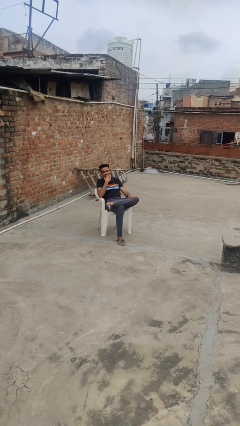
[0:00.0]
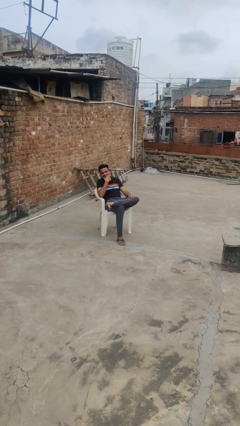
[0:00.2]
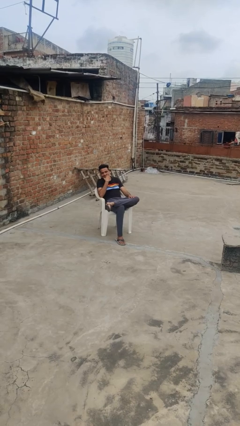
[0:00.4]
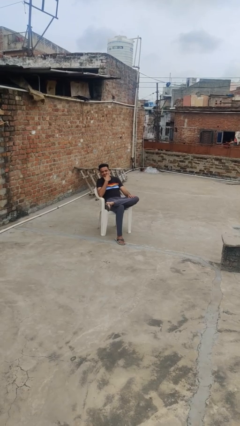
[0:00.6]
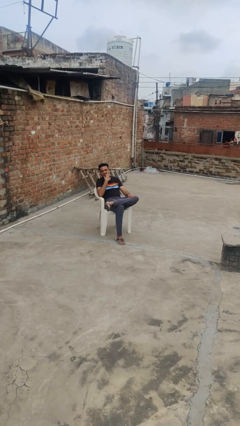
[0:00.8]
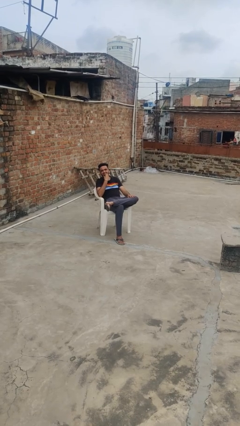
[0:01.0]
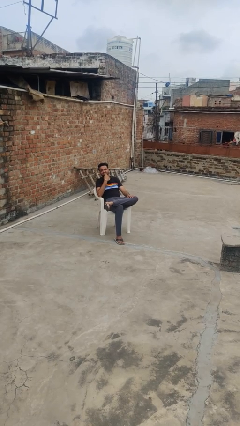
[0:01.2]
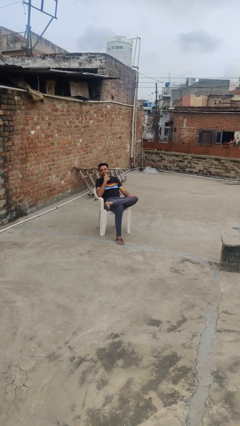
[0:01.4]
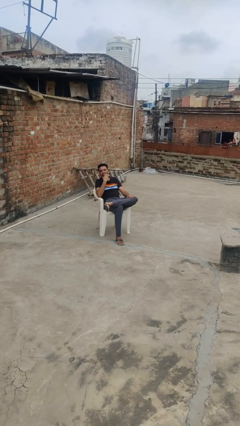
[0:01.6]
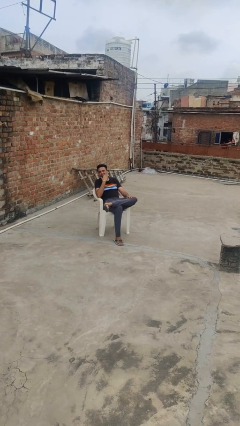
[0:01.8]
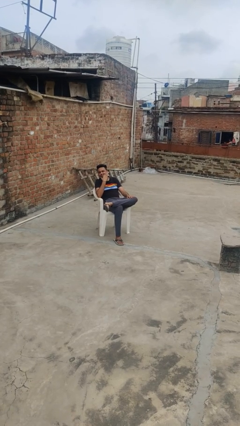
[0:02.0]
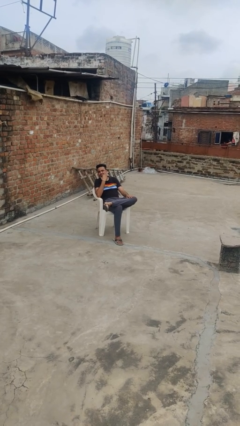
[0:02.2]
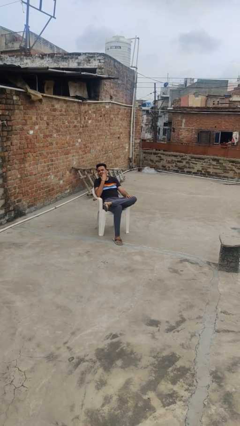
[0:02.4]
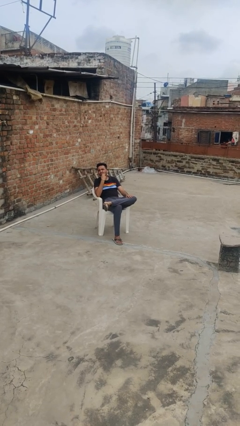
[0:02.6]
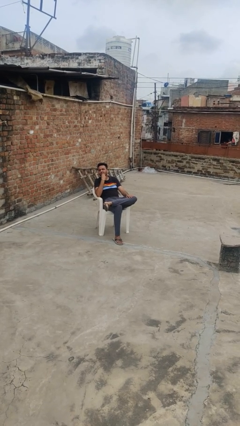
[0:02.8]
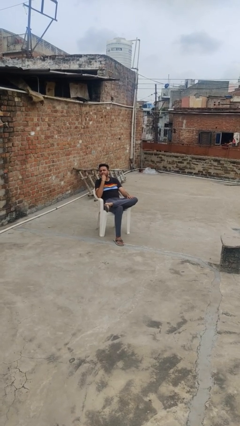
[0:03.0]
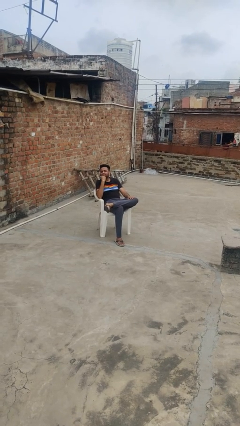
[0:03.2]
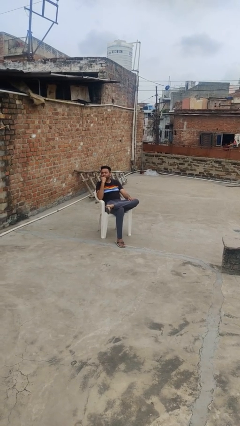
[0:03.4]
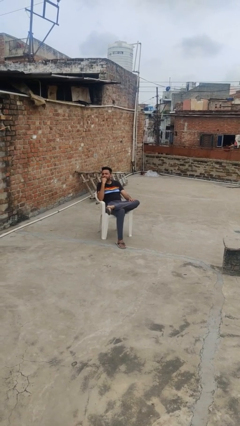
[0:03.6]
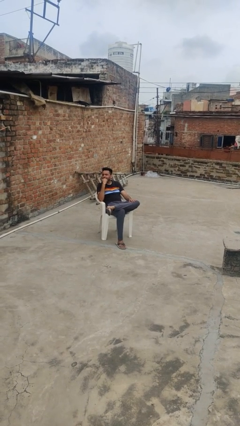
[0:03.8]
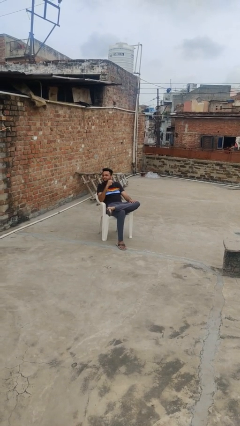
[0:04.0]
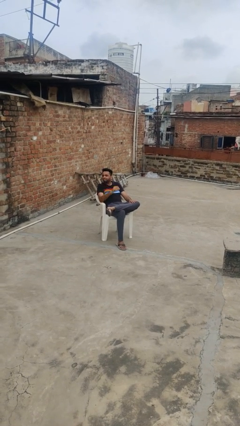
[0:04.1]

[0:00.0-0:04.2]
person strokes chin

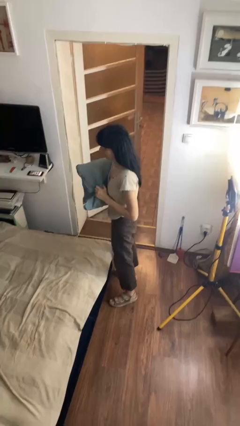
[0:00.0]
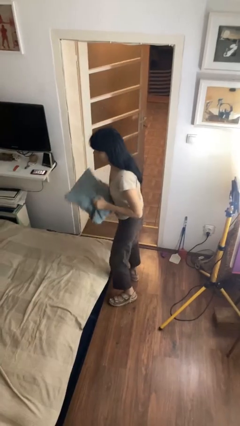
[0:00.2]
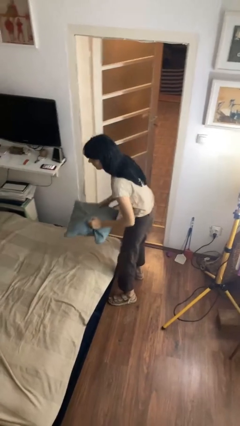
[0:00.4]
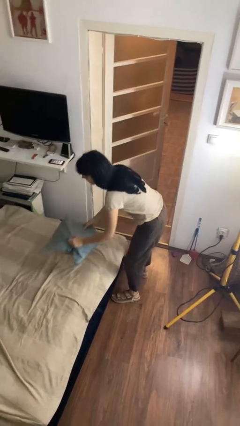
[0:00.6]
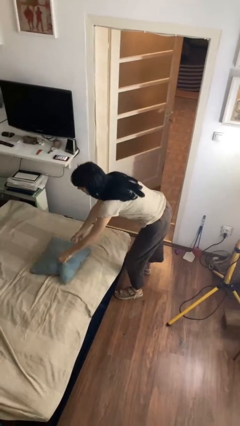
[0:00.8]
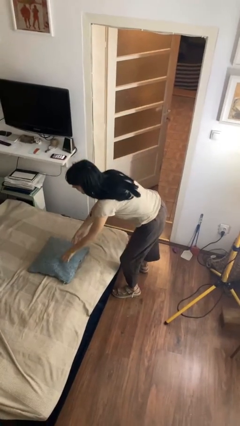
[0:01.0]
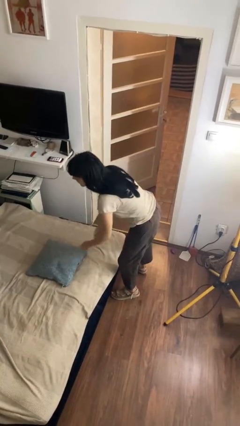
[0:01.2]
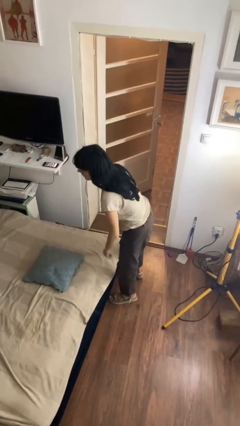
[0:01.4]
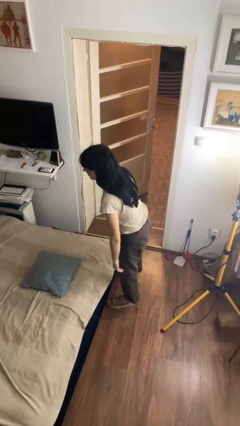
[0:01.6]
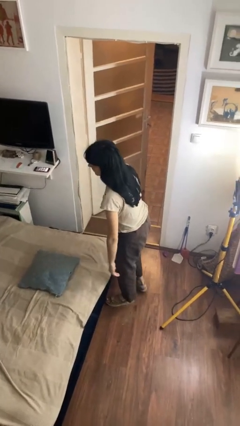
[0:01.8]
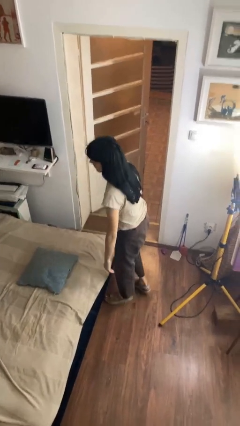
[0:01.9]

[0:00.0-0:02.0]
person puts down object on bed

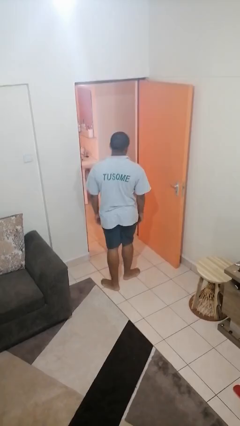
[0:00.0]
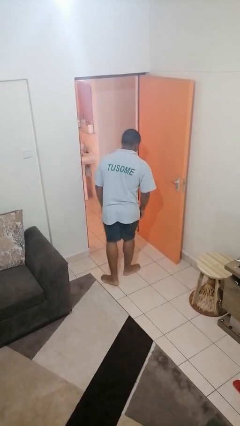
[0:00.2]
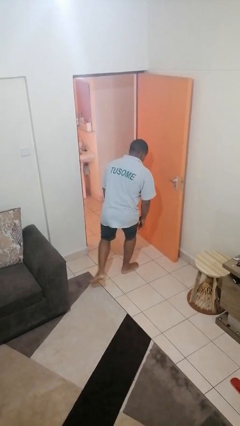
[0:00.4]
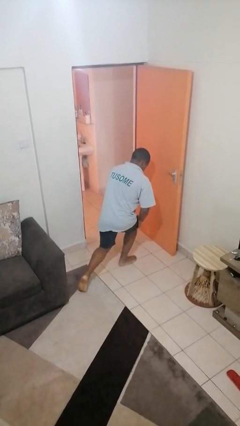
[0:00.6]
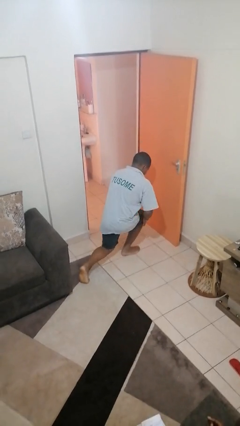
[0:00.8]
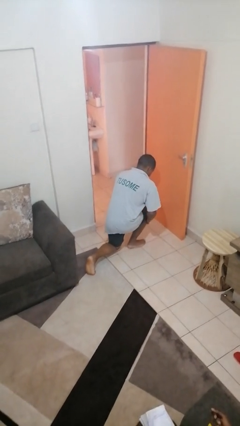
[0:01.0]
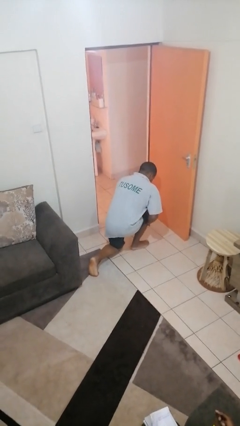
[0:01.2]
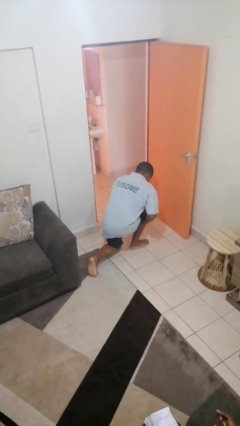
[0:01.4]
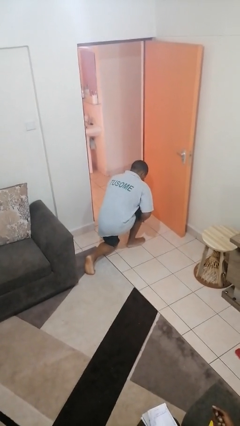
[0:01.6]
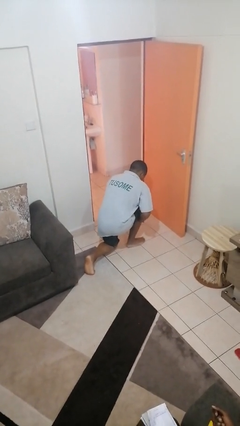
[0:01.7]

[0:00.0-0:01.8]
person kneels

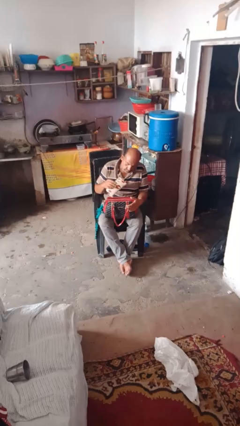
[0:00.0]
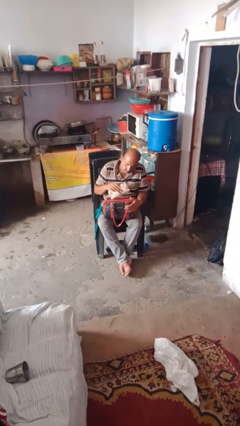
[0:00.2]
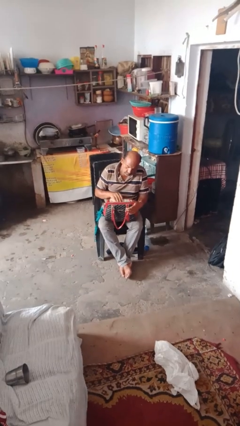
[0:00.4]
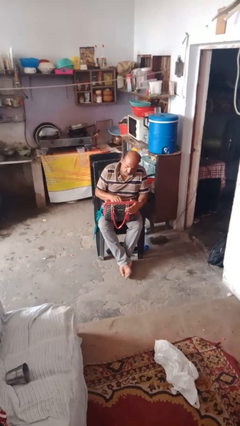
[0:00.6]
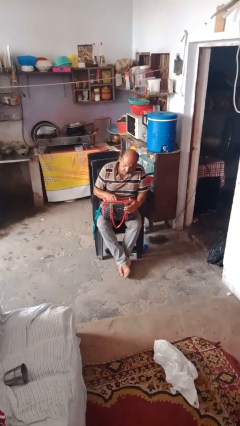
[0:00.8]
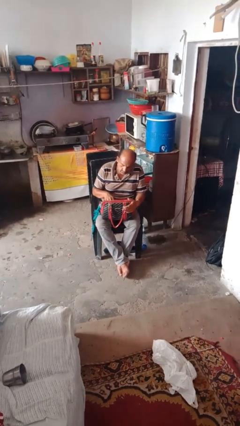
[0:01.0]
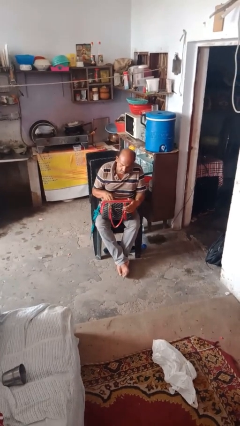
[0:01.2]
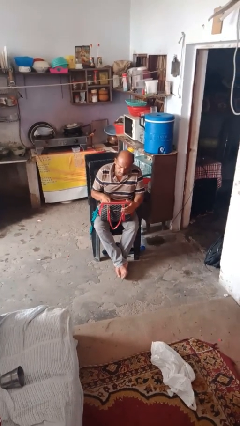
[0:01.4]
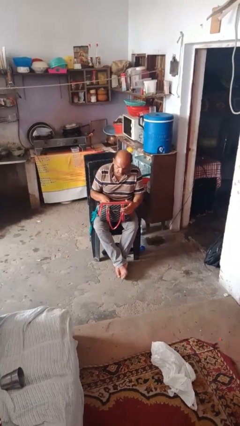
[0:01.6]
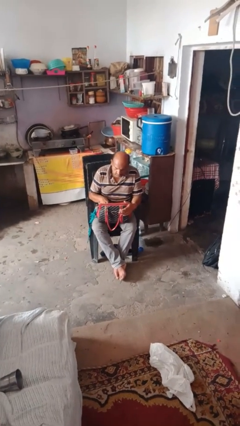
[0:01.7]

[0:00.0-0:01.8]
person puts object into purse

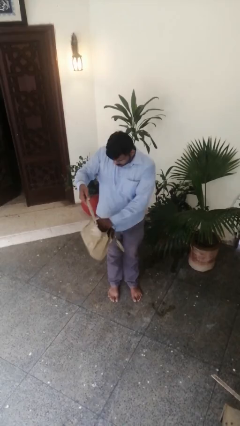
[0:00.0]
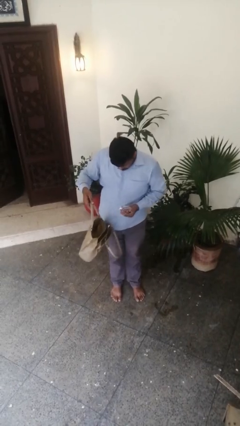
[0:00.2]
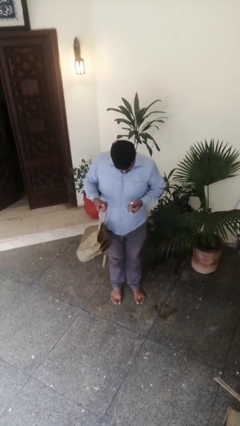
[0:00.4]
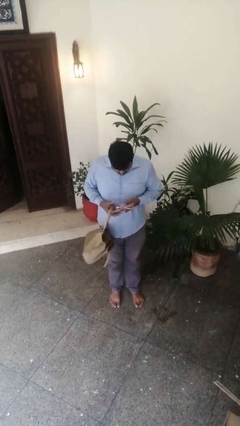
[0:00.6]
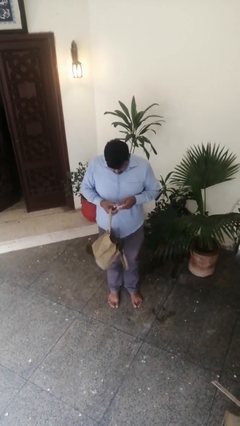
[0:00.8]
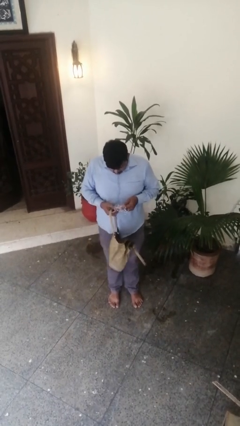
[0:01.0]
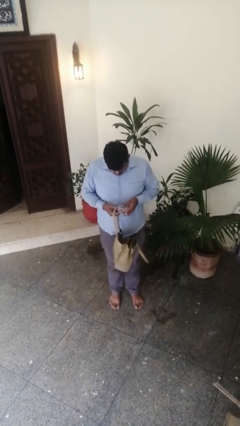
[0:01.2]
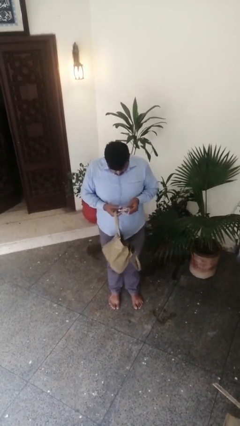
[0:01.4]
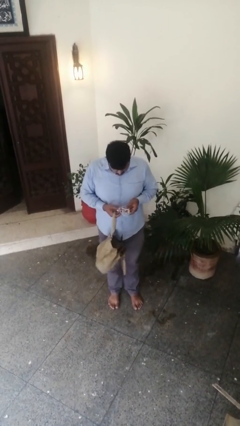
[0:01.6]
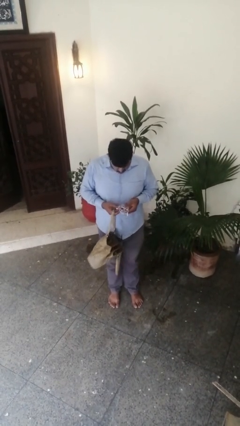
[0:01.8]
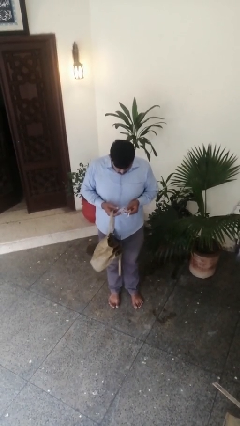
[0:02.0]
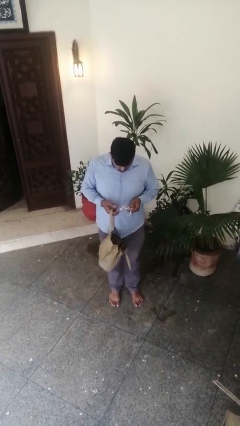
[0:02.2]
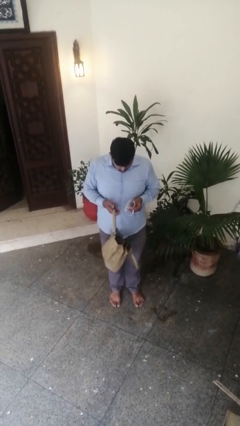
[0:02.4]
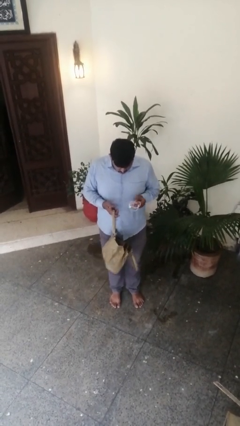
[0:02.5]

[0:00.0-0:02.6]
person takes object from purse

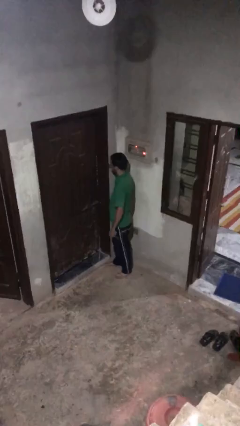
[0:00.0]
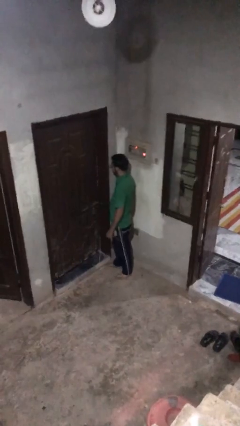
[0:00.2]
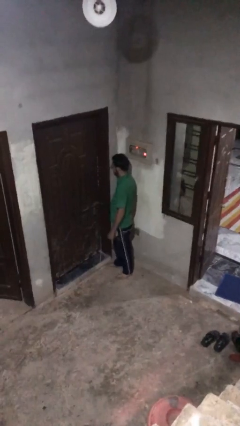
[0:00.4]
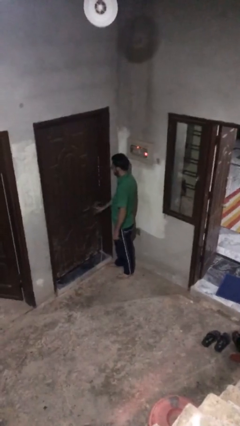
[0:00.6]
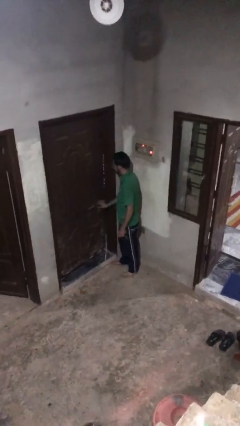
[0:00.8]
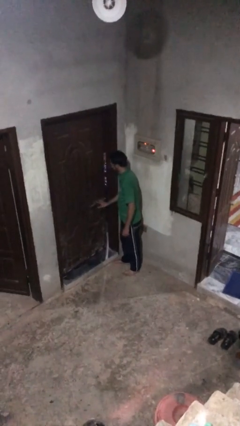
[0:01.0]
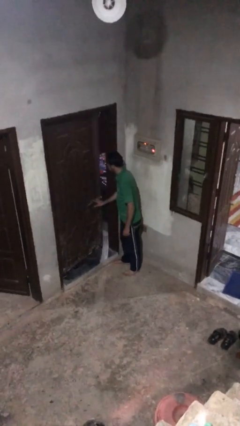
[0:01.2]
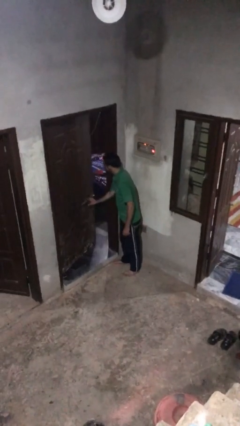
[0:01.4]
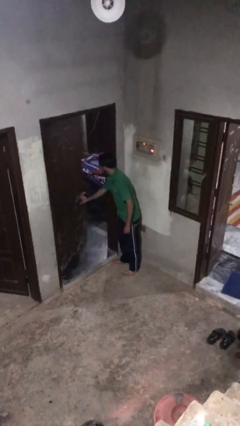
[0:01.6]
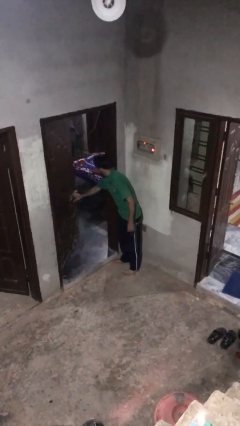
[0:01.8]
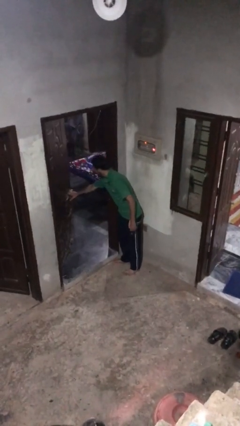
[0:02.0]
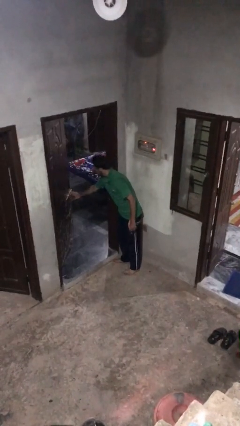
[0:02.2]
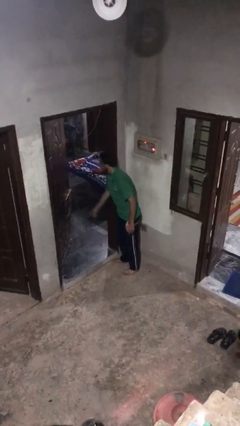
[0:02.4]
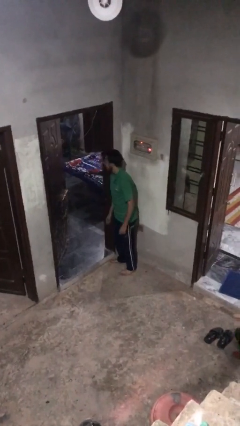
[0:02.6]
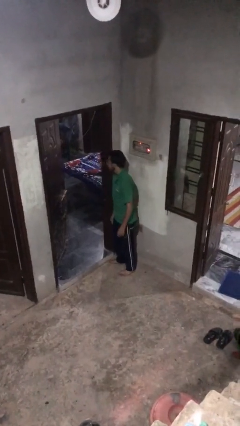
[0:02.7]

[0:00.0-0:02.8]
person opens facility door

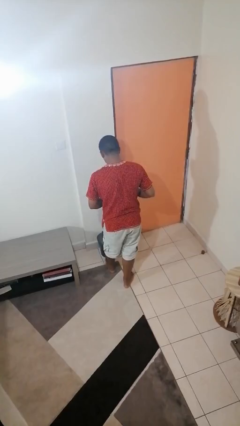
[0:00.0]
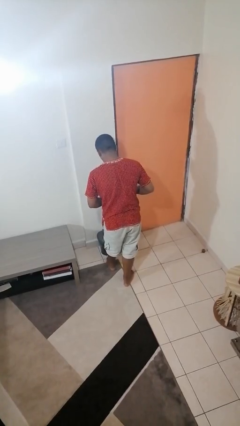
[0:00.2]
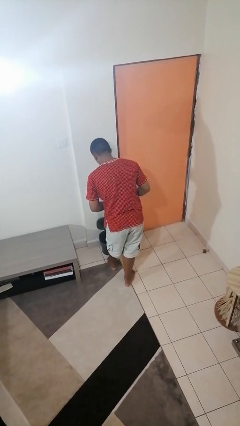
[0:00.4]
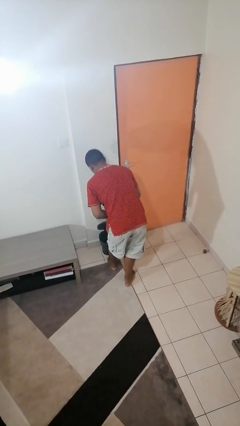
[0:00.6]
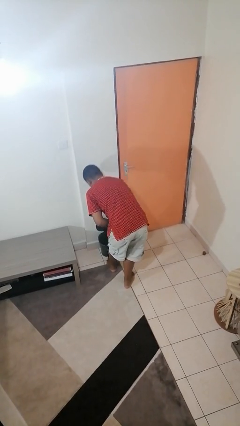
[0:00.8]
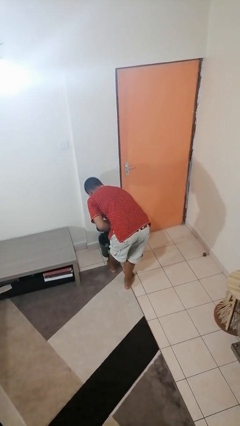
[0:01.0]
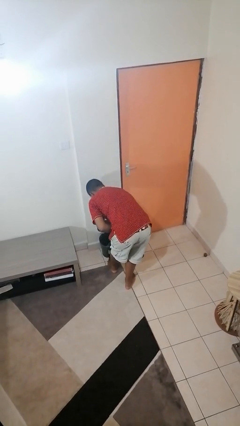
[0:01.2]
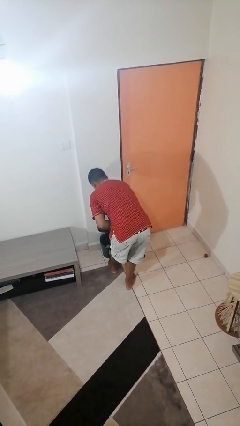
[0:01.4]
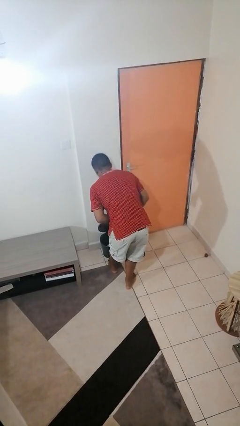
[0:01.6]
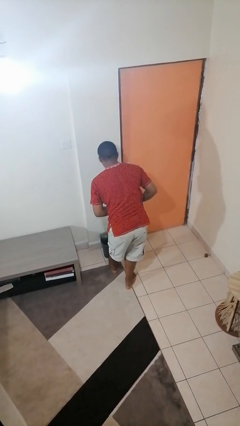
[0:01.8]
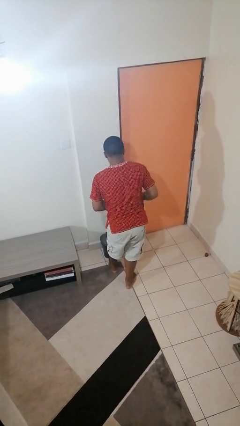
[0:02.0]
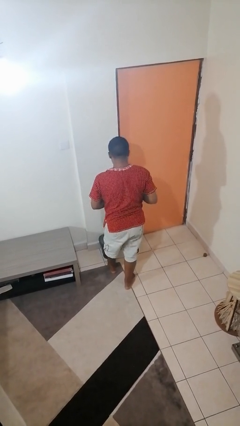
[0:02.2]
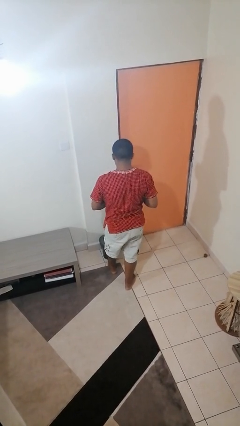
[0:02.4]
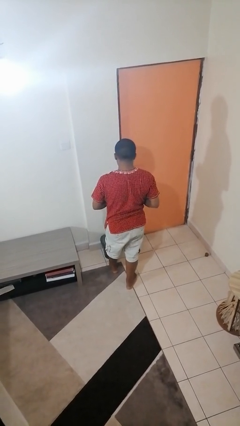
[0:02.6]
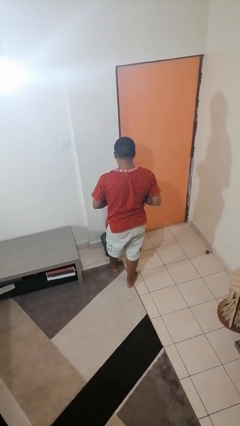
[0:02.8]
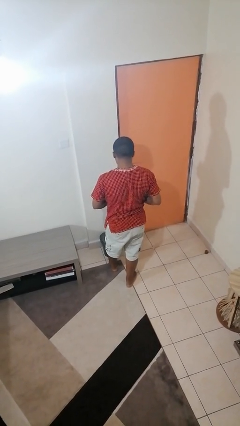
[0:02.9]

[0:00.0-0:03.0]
person discards trash
